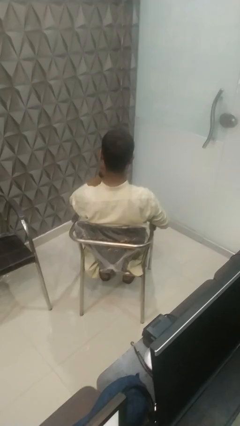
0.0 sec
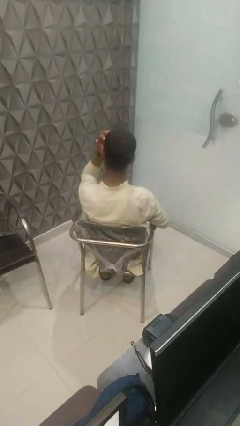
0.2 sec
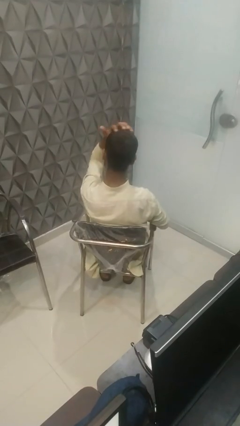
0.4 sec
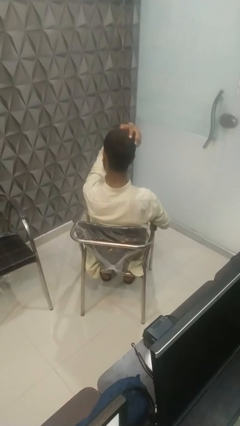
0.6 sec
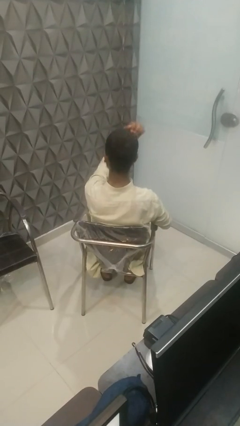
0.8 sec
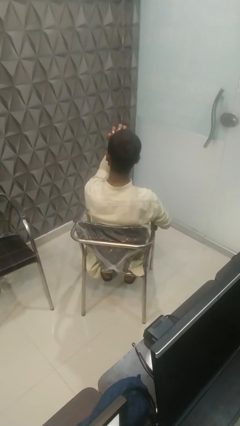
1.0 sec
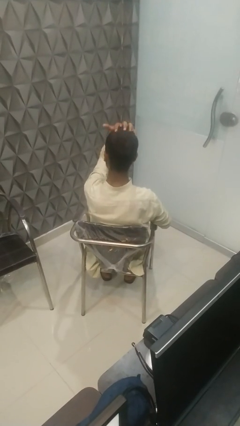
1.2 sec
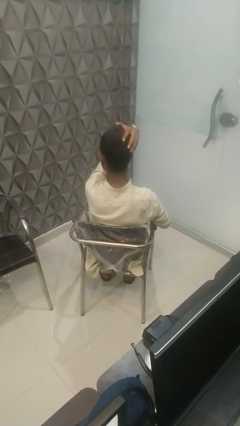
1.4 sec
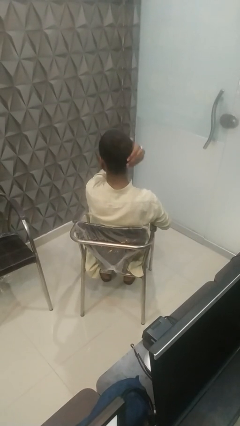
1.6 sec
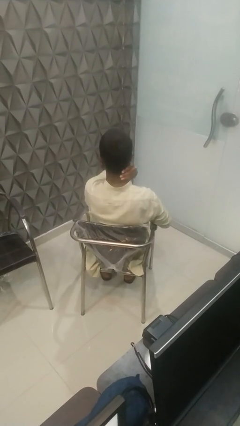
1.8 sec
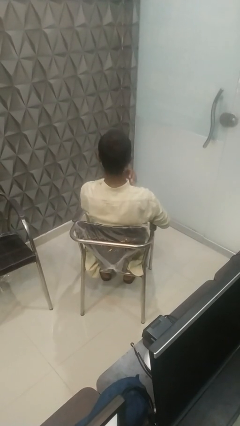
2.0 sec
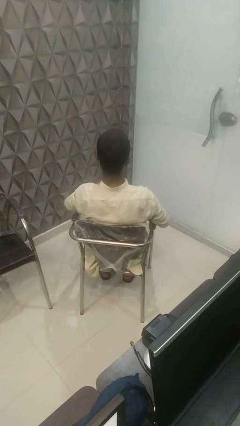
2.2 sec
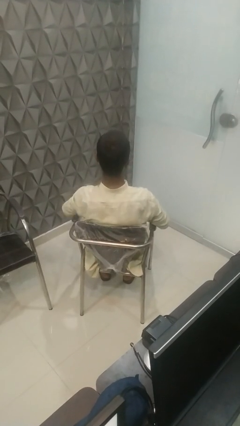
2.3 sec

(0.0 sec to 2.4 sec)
person strokes hair

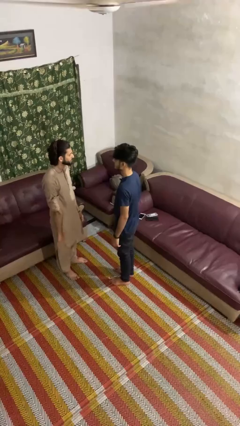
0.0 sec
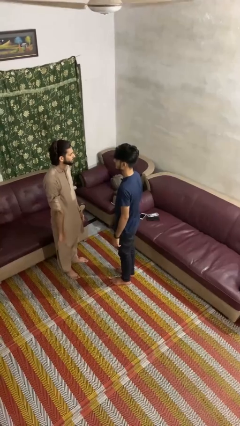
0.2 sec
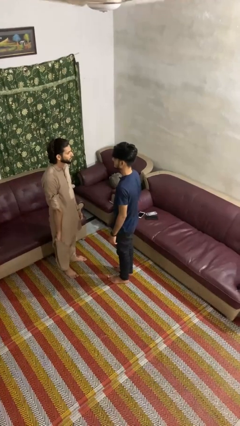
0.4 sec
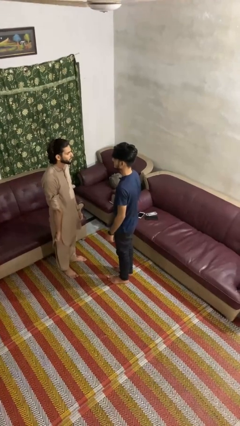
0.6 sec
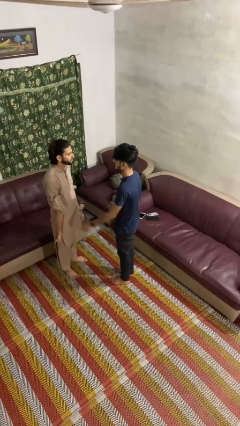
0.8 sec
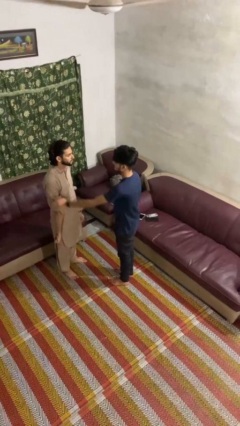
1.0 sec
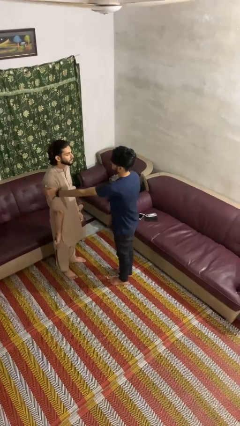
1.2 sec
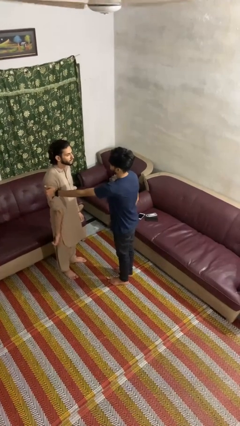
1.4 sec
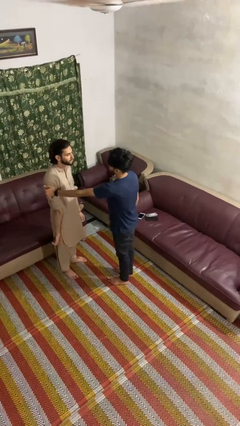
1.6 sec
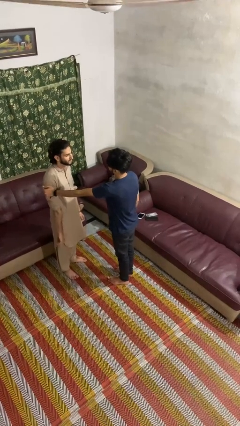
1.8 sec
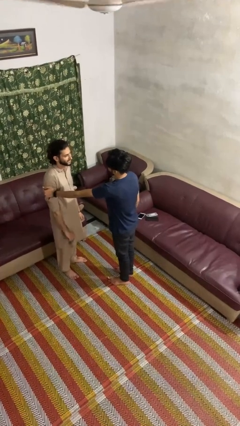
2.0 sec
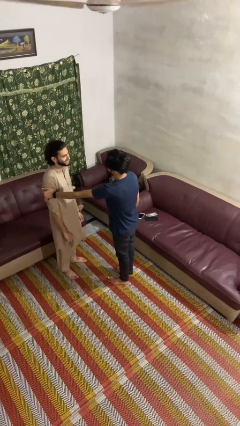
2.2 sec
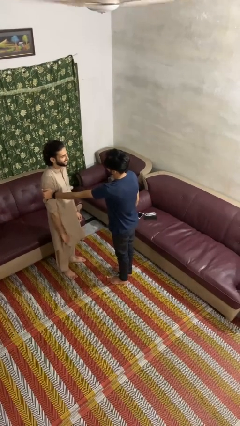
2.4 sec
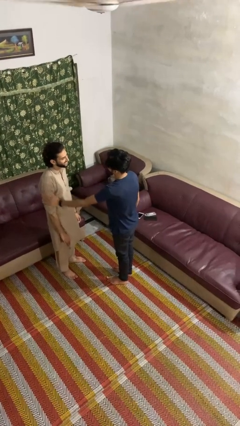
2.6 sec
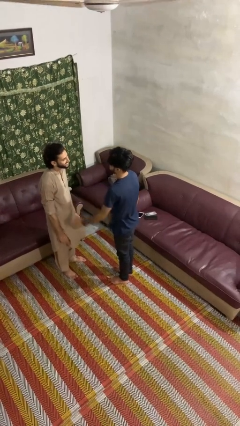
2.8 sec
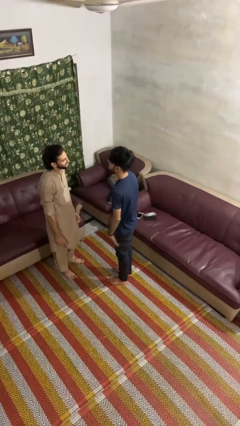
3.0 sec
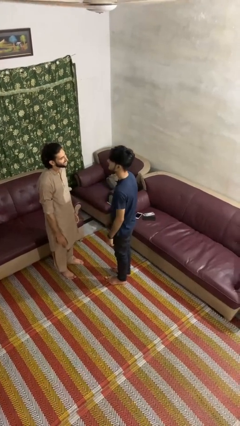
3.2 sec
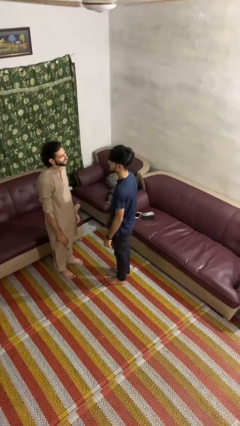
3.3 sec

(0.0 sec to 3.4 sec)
person grabs person by bicep

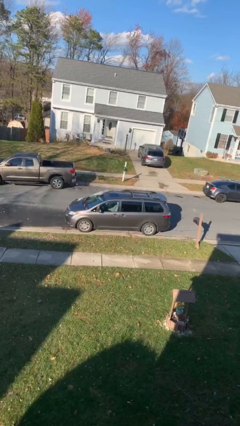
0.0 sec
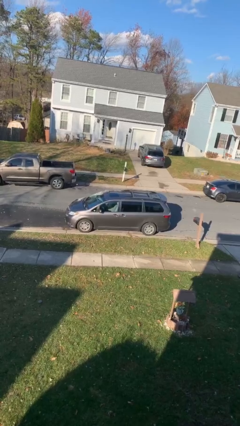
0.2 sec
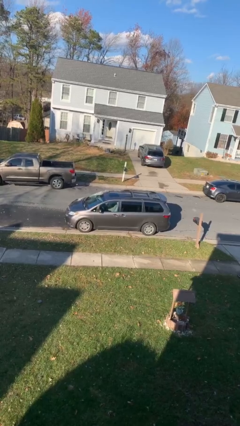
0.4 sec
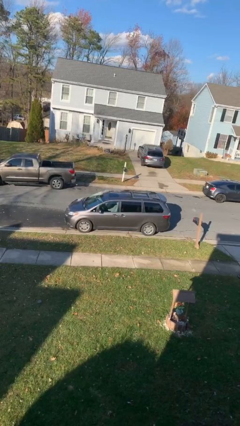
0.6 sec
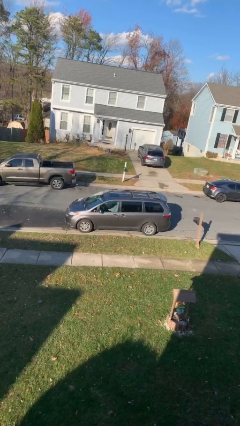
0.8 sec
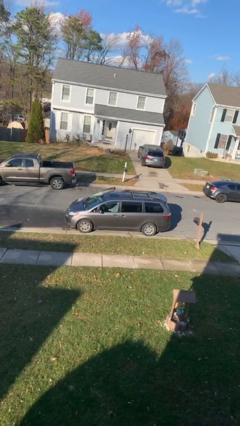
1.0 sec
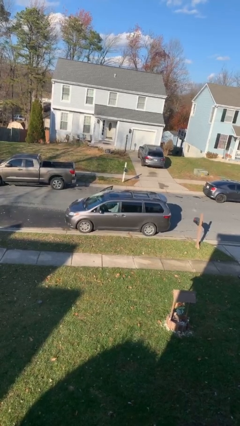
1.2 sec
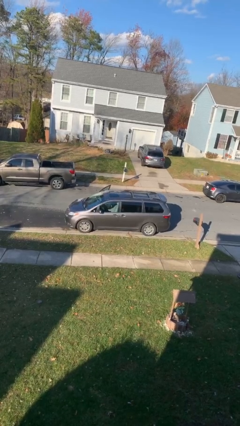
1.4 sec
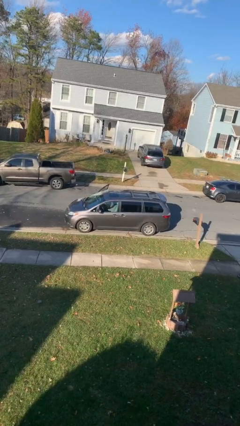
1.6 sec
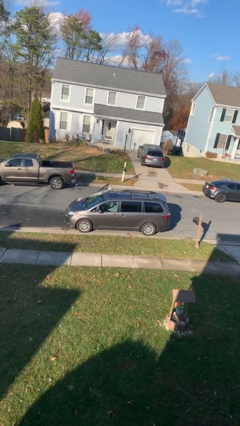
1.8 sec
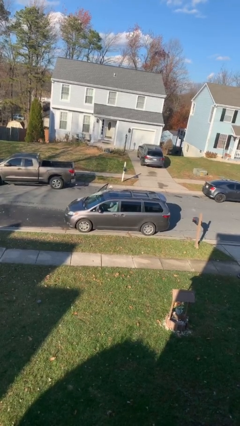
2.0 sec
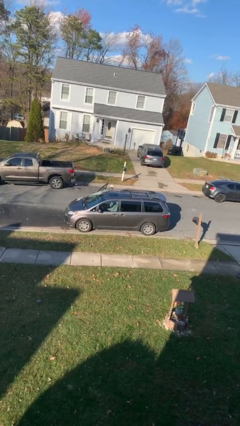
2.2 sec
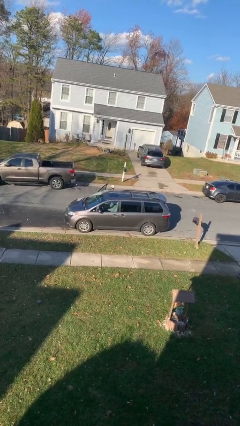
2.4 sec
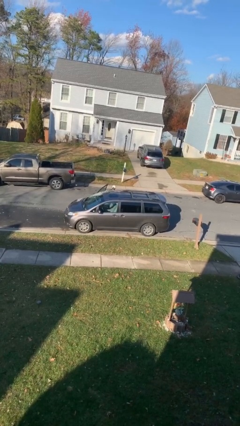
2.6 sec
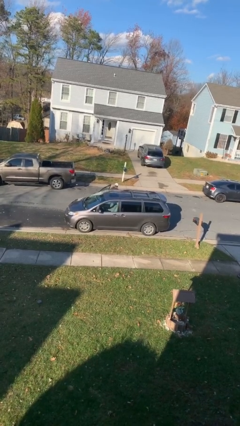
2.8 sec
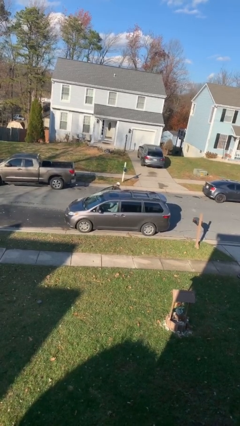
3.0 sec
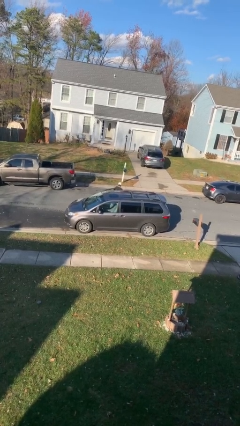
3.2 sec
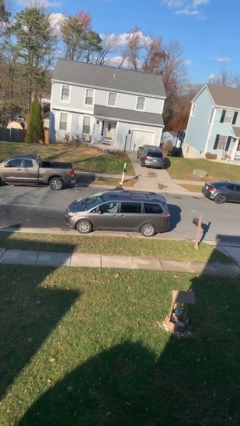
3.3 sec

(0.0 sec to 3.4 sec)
car drops off person

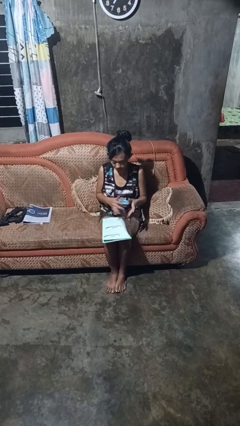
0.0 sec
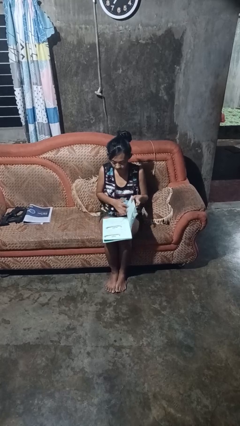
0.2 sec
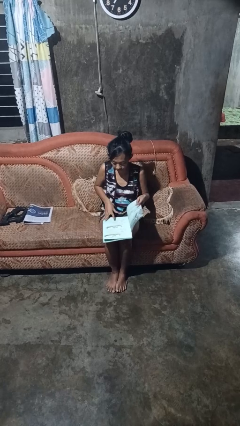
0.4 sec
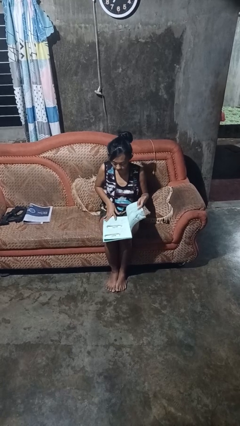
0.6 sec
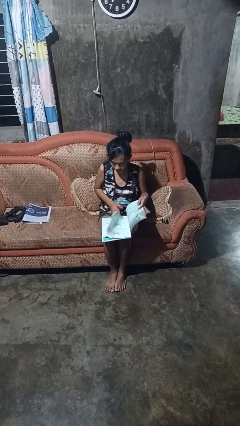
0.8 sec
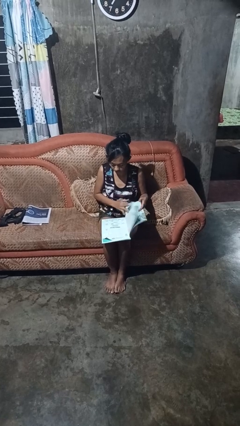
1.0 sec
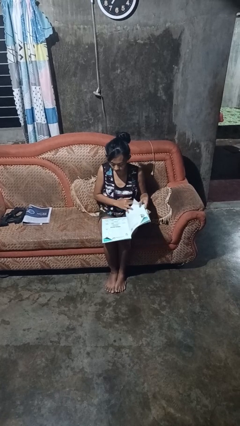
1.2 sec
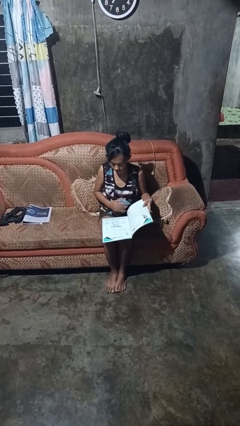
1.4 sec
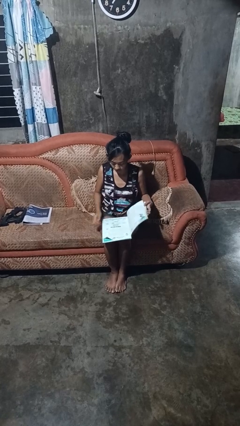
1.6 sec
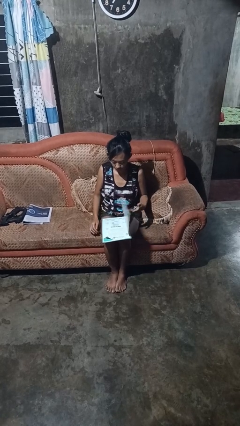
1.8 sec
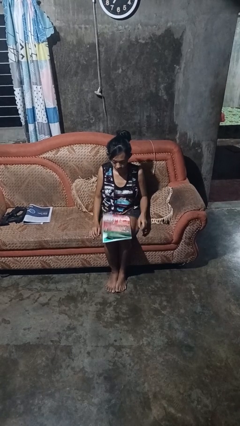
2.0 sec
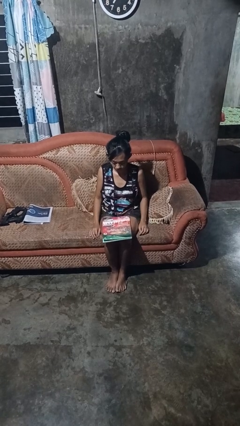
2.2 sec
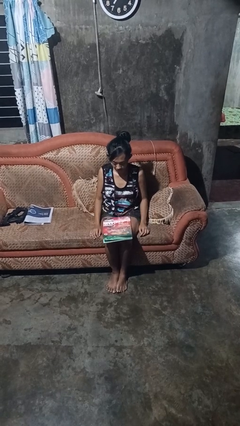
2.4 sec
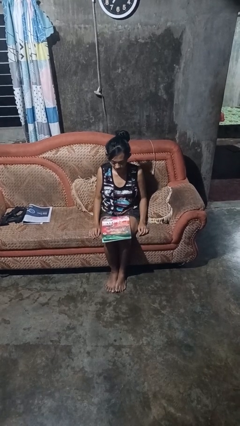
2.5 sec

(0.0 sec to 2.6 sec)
person reads magazine

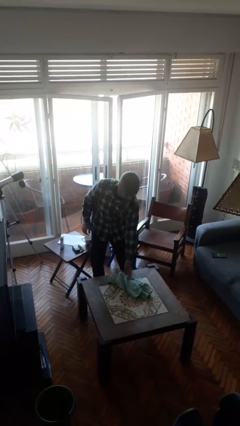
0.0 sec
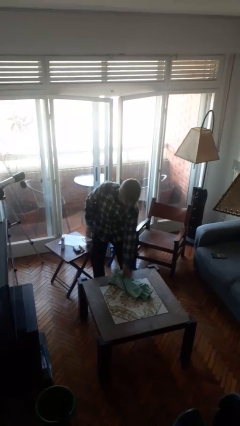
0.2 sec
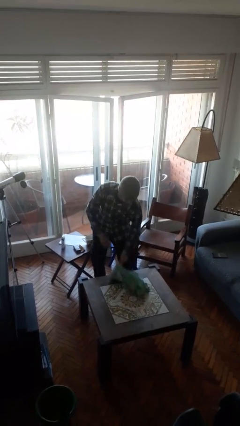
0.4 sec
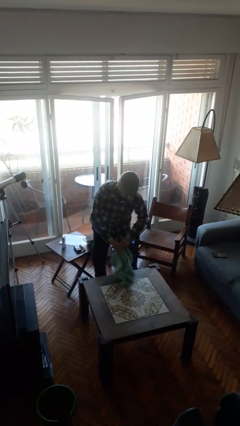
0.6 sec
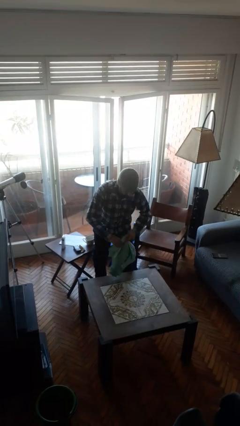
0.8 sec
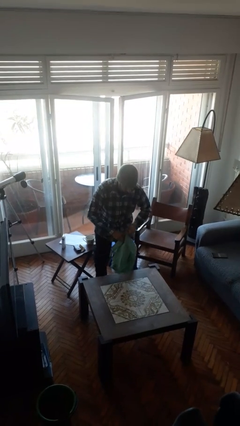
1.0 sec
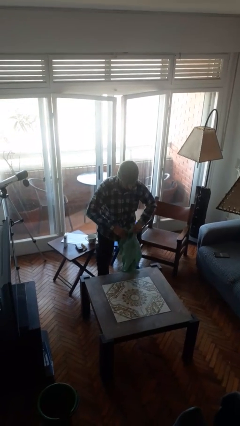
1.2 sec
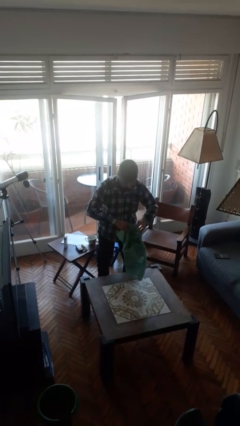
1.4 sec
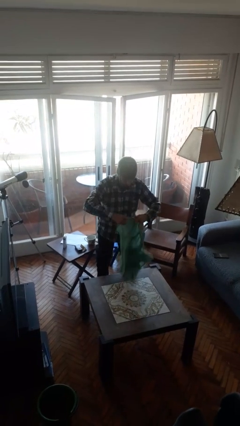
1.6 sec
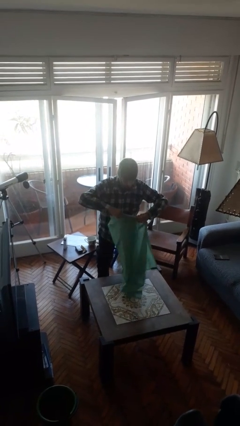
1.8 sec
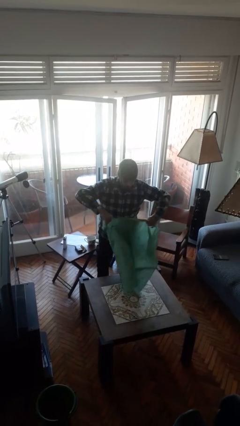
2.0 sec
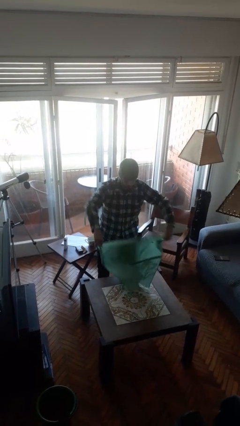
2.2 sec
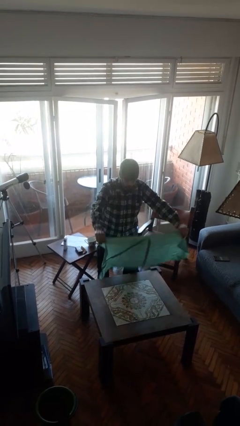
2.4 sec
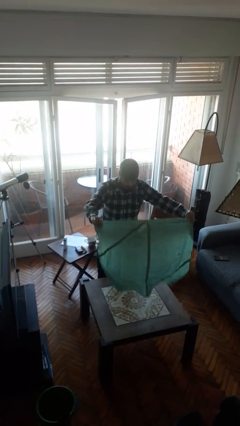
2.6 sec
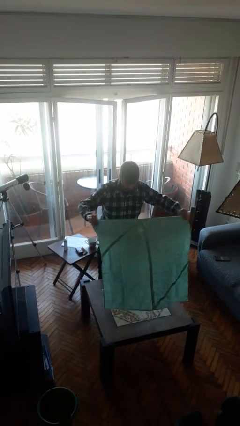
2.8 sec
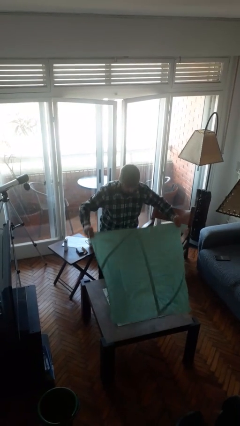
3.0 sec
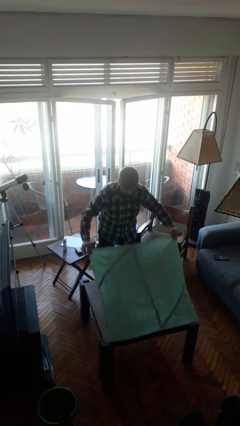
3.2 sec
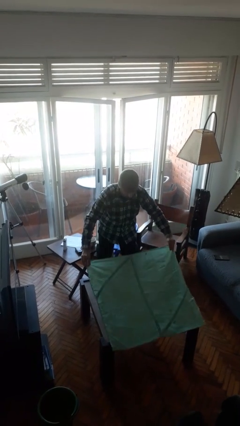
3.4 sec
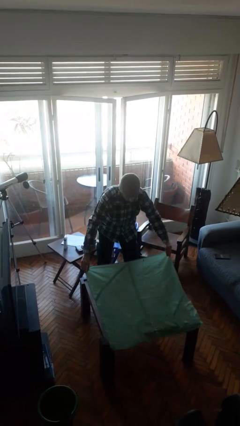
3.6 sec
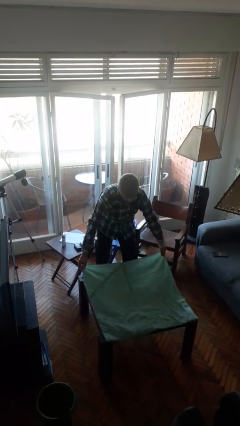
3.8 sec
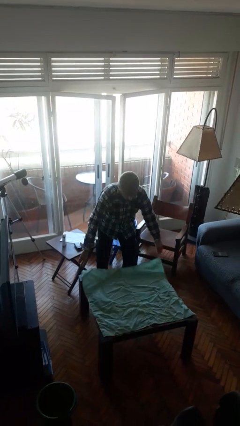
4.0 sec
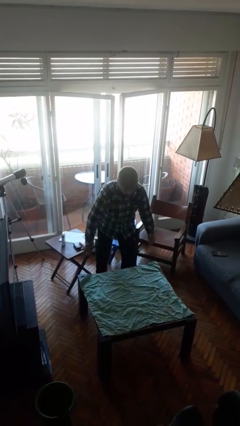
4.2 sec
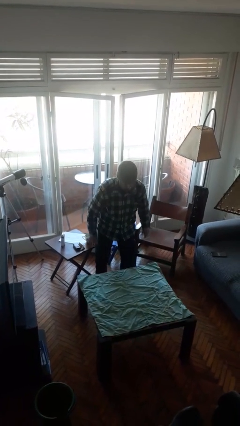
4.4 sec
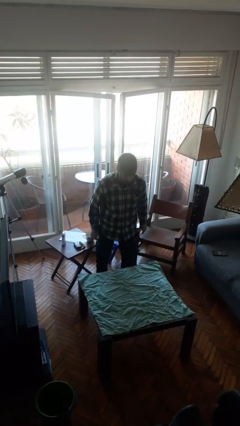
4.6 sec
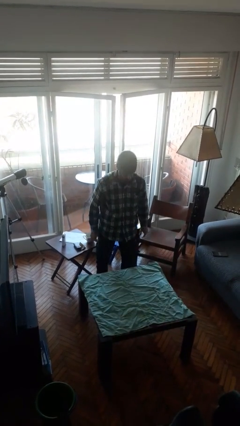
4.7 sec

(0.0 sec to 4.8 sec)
person spreads tablecloth

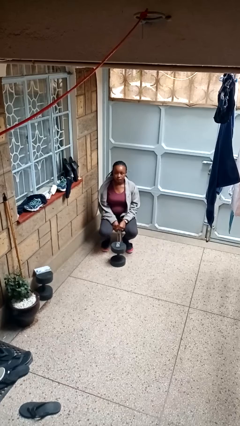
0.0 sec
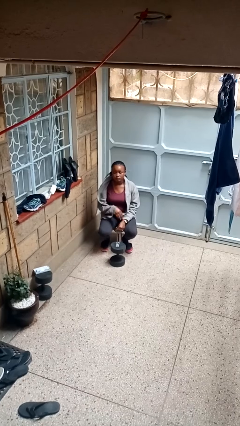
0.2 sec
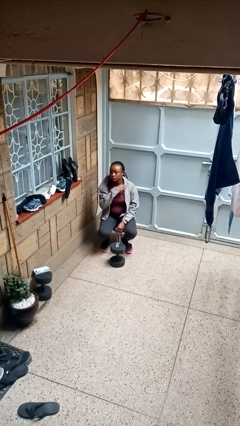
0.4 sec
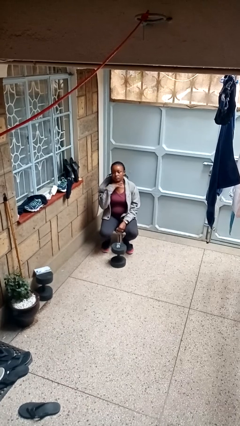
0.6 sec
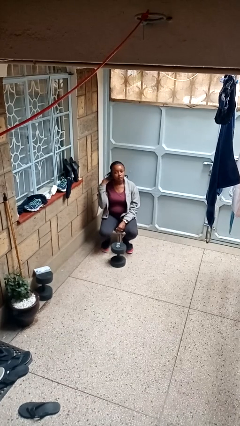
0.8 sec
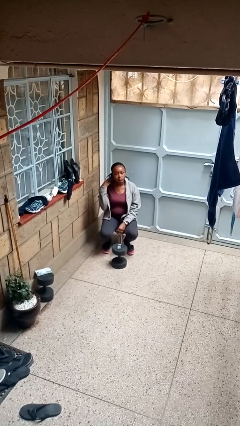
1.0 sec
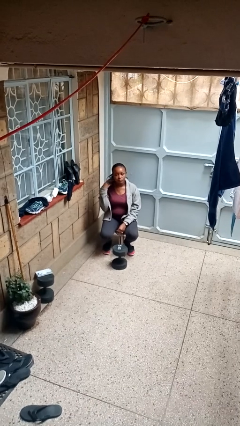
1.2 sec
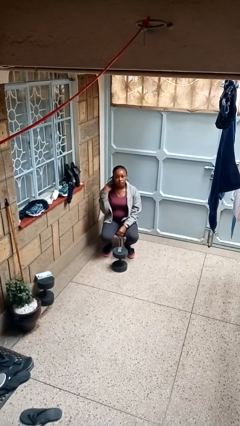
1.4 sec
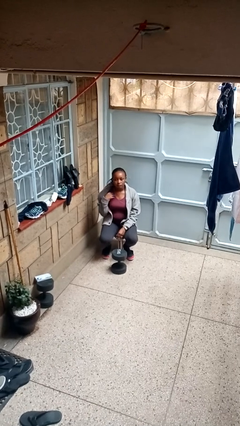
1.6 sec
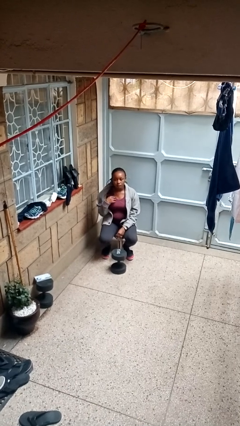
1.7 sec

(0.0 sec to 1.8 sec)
person gestures cut
